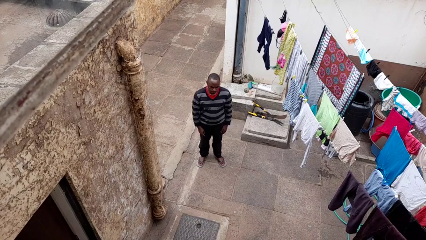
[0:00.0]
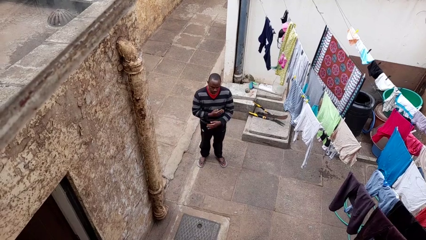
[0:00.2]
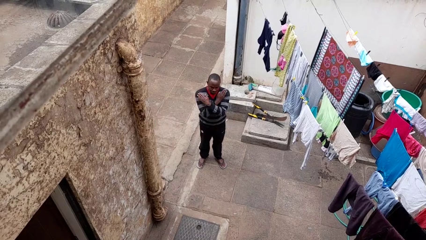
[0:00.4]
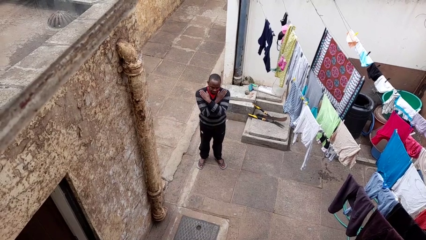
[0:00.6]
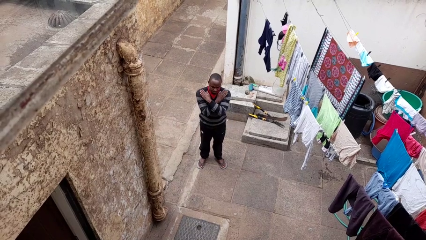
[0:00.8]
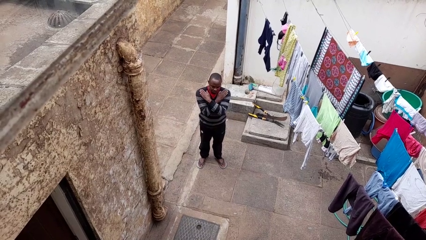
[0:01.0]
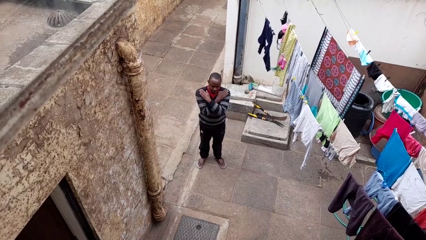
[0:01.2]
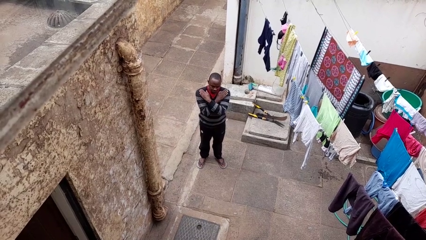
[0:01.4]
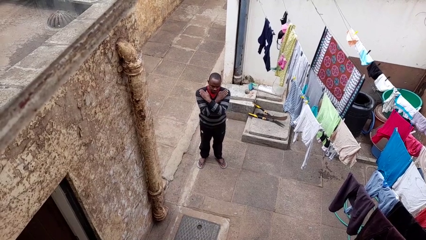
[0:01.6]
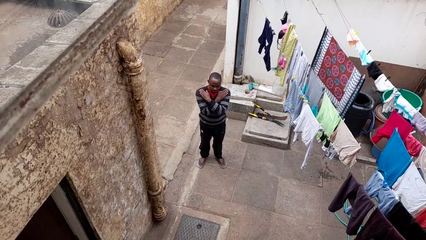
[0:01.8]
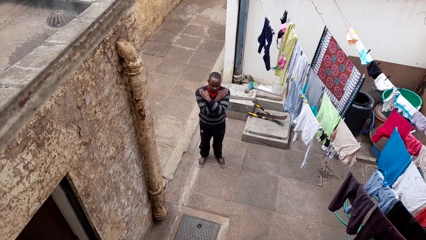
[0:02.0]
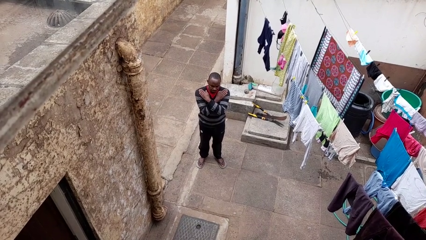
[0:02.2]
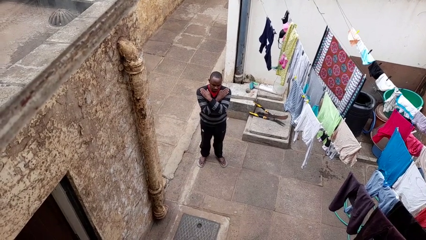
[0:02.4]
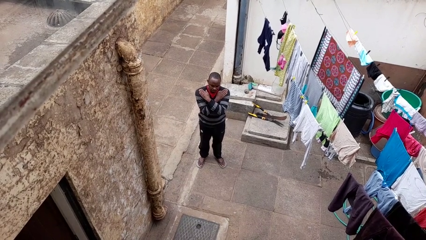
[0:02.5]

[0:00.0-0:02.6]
person gestures arms x

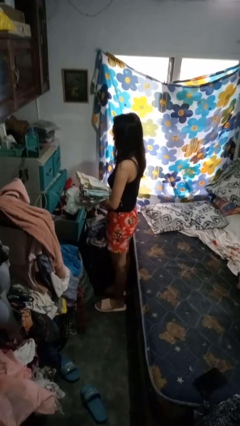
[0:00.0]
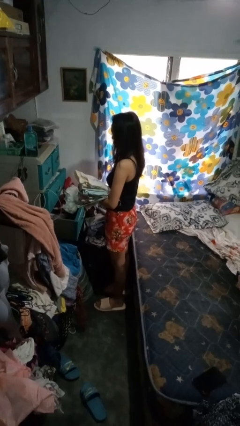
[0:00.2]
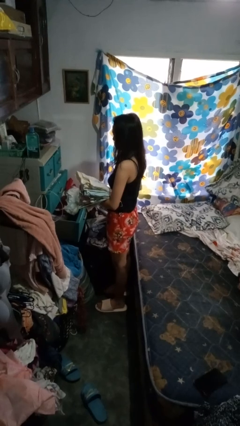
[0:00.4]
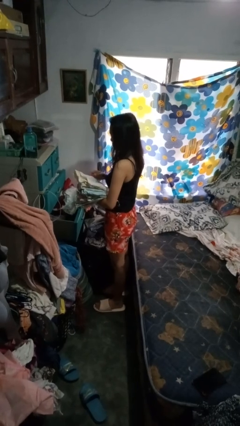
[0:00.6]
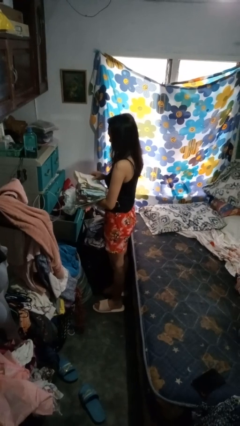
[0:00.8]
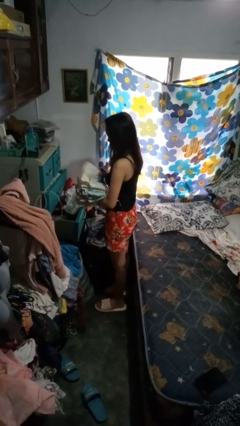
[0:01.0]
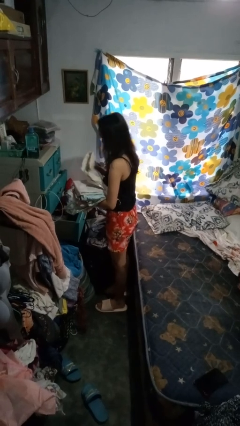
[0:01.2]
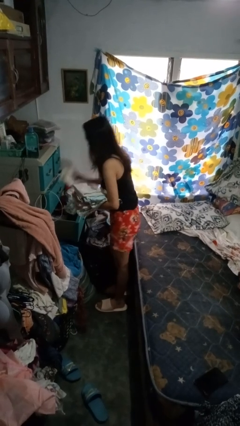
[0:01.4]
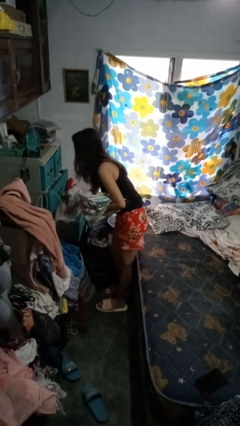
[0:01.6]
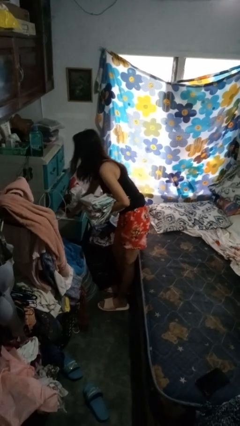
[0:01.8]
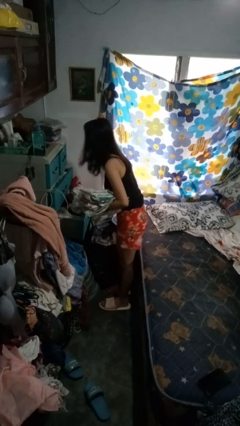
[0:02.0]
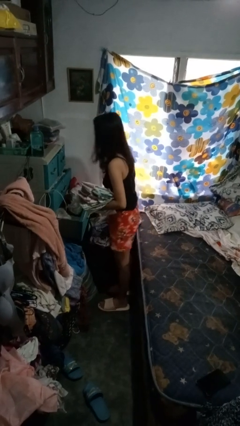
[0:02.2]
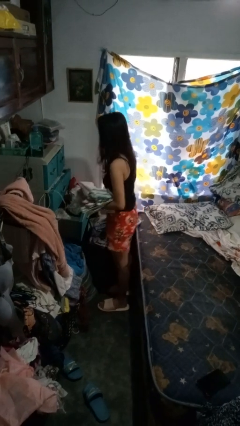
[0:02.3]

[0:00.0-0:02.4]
person puts clothes into dresser

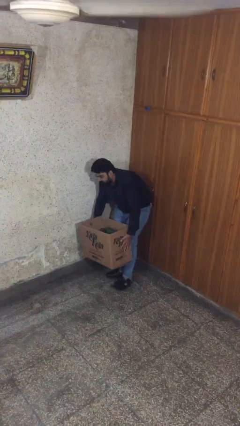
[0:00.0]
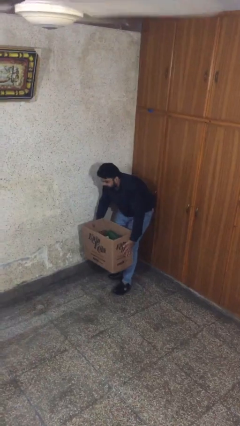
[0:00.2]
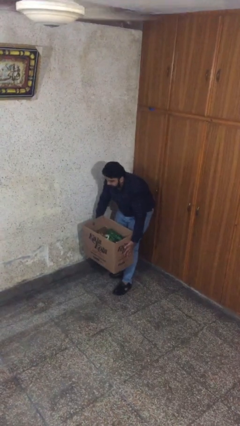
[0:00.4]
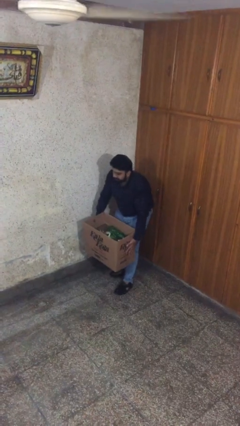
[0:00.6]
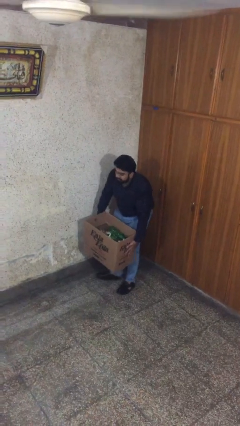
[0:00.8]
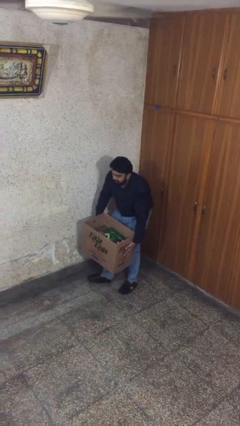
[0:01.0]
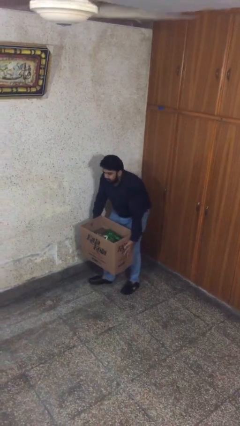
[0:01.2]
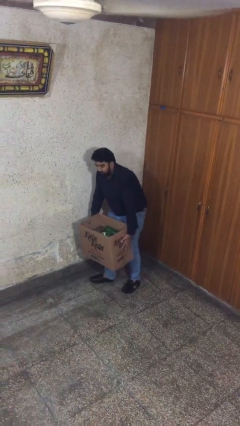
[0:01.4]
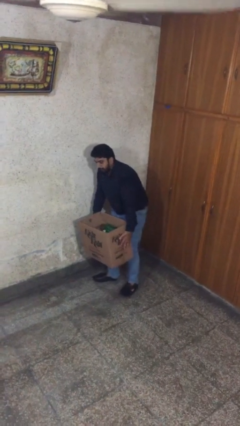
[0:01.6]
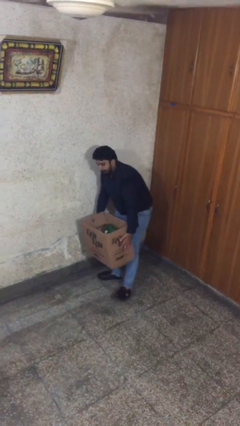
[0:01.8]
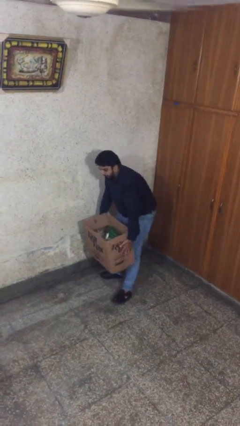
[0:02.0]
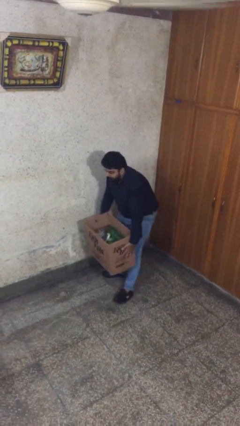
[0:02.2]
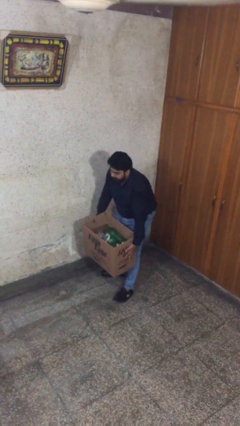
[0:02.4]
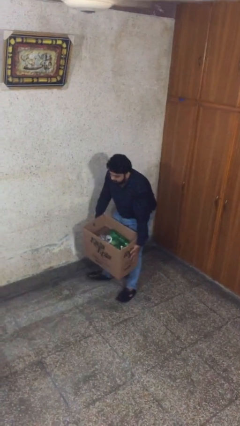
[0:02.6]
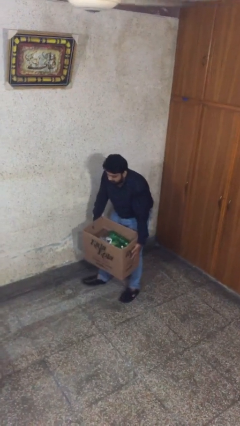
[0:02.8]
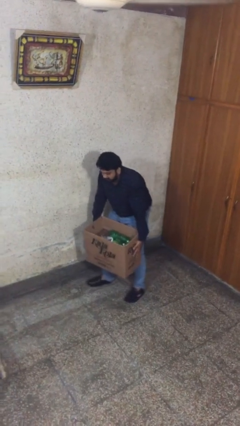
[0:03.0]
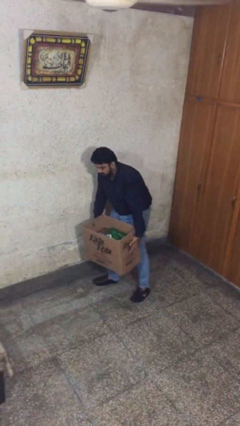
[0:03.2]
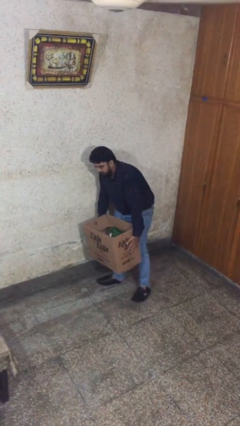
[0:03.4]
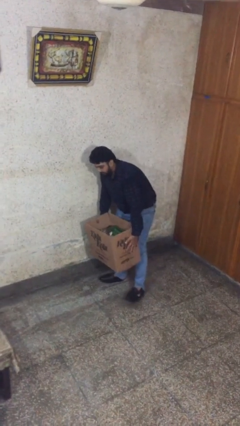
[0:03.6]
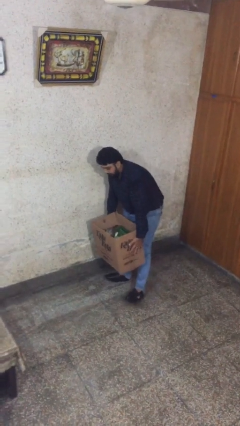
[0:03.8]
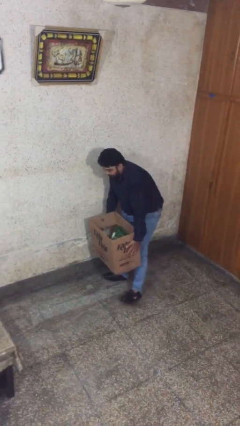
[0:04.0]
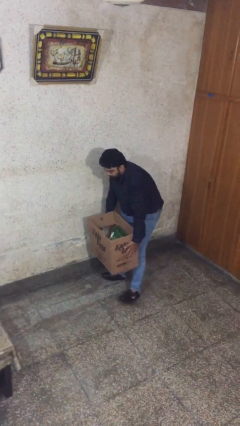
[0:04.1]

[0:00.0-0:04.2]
person carries heavy object

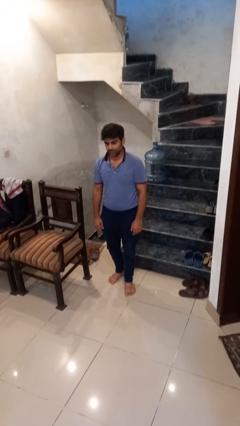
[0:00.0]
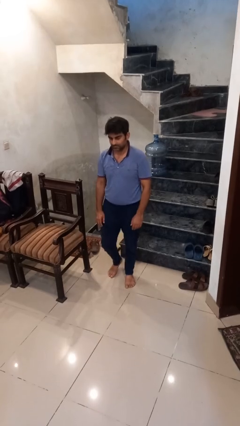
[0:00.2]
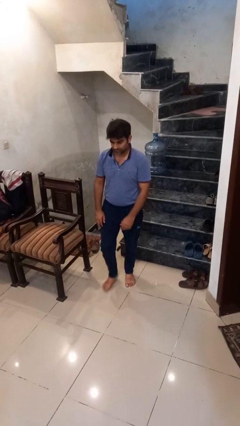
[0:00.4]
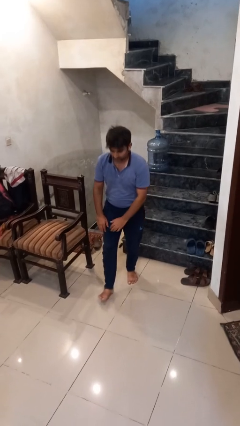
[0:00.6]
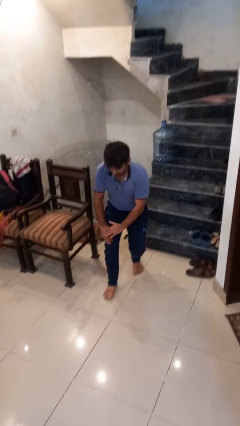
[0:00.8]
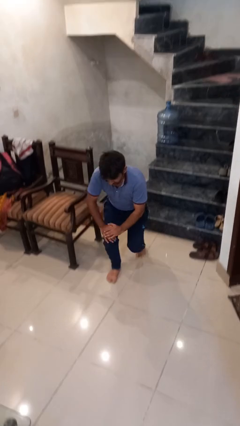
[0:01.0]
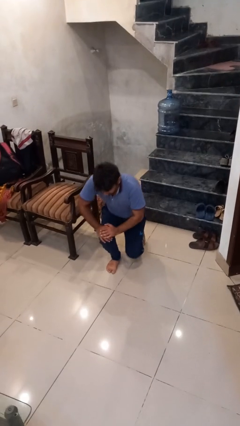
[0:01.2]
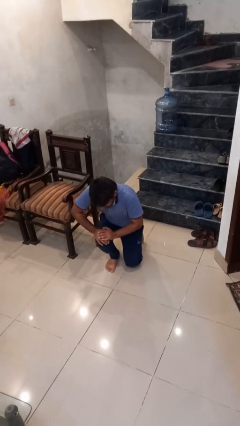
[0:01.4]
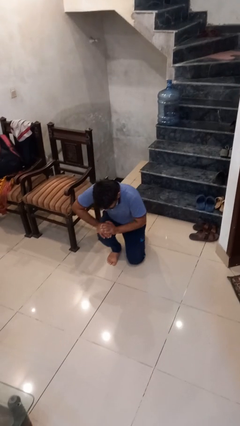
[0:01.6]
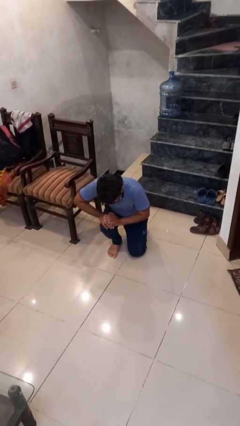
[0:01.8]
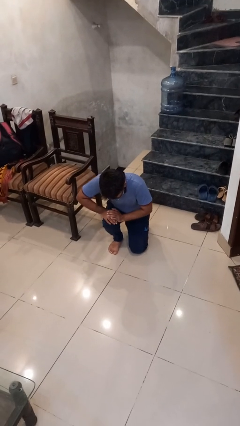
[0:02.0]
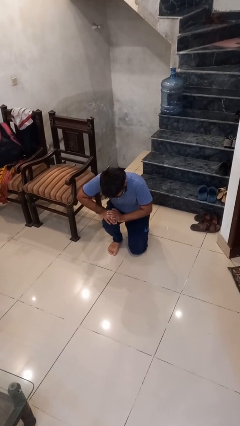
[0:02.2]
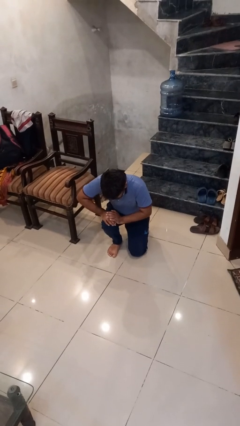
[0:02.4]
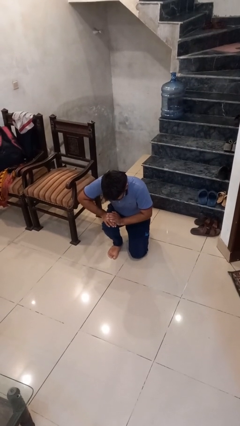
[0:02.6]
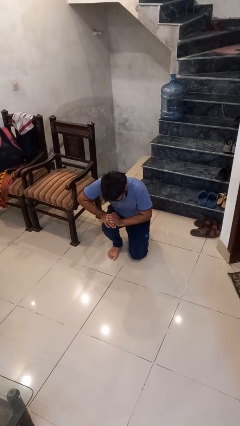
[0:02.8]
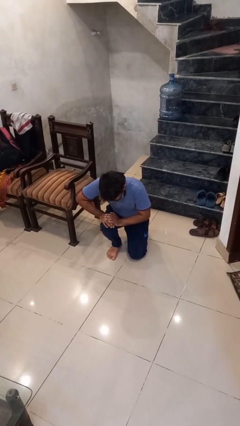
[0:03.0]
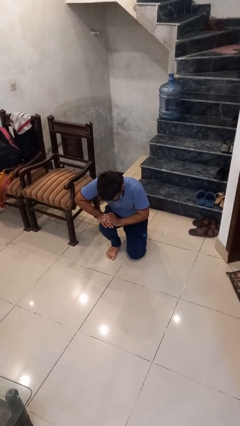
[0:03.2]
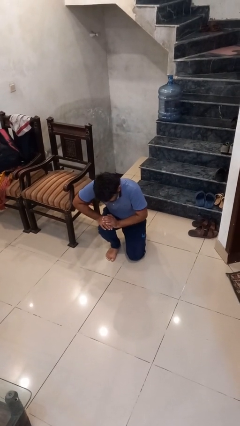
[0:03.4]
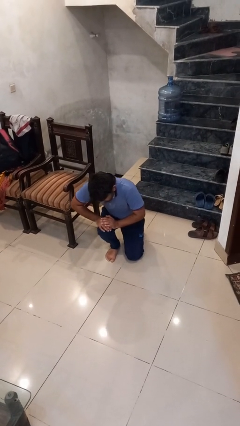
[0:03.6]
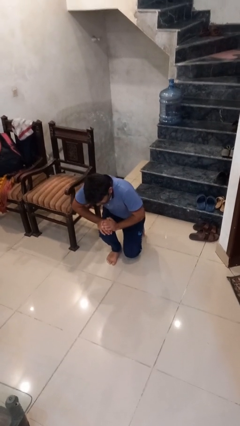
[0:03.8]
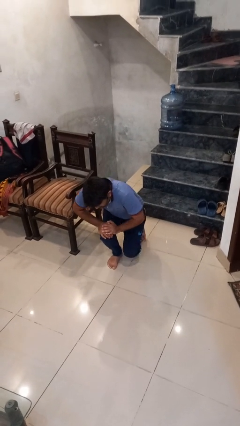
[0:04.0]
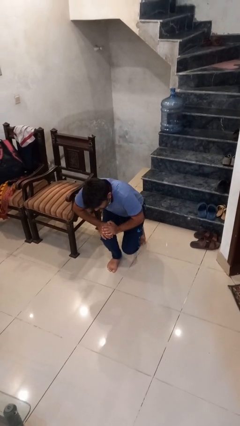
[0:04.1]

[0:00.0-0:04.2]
person kneels

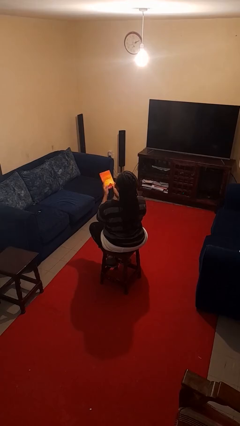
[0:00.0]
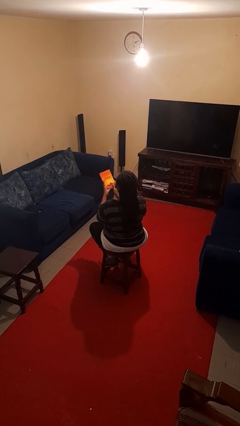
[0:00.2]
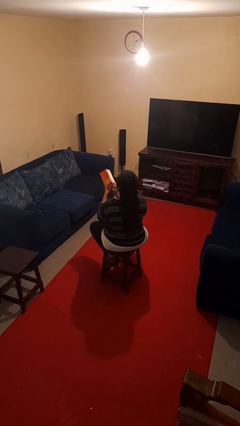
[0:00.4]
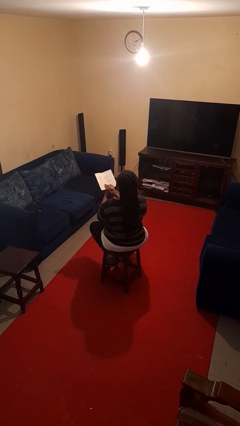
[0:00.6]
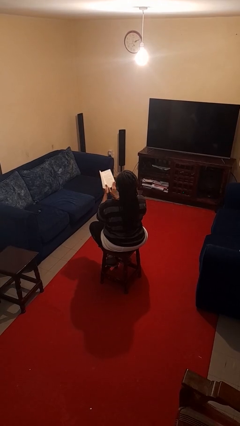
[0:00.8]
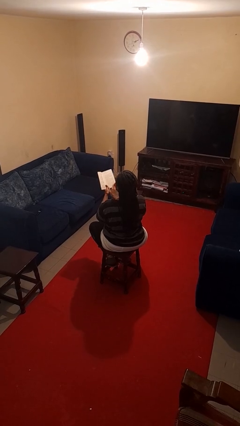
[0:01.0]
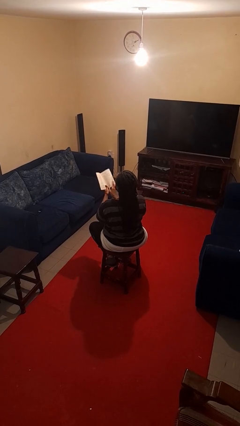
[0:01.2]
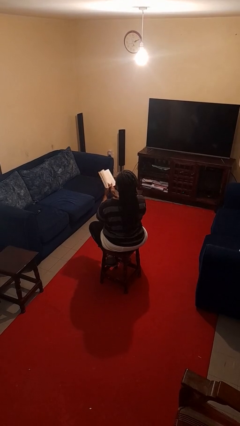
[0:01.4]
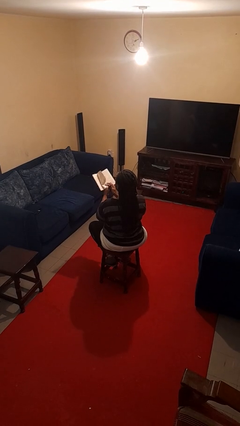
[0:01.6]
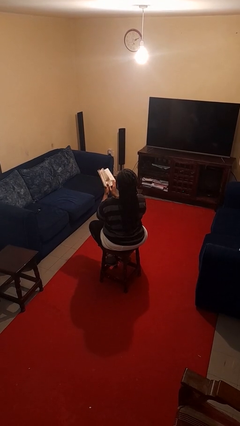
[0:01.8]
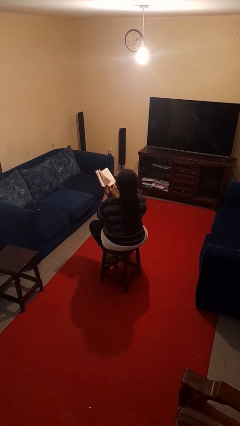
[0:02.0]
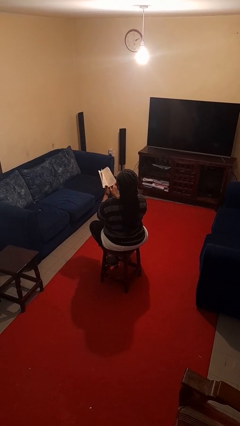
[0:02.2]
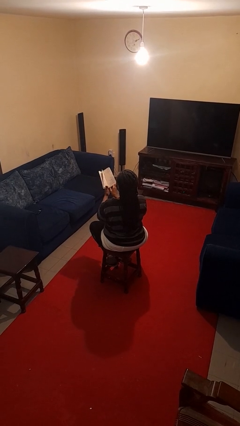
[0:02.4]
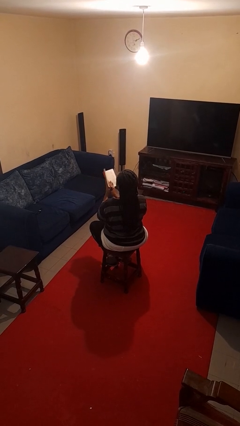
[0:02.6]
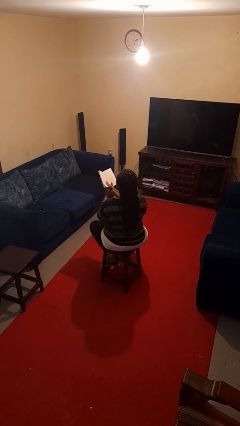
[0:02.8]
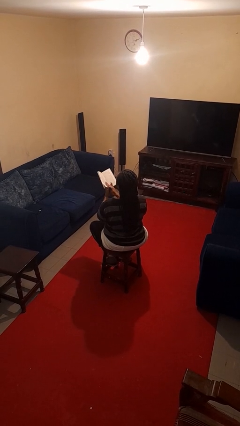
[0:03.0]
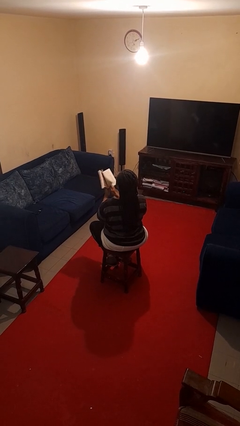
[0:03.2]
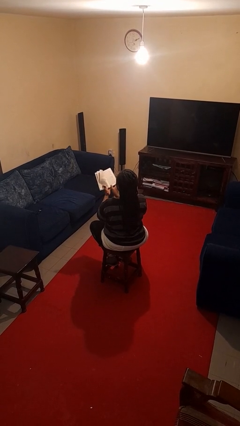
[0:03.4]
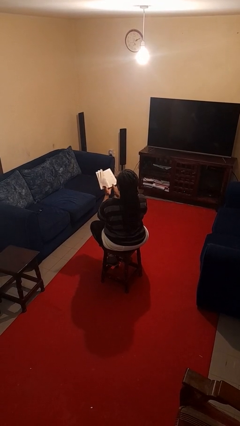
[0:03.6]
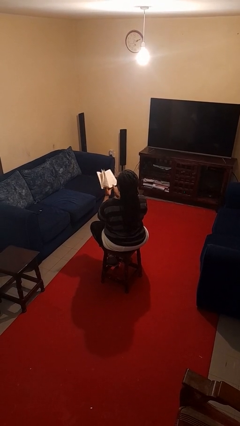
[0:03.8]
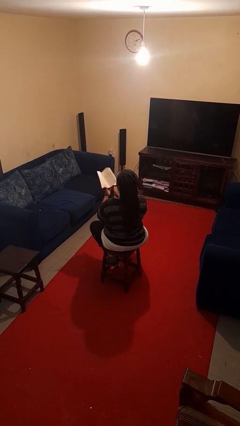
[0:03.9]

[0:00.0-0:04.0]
person reads book
